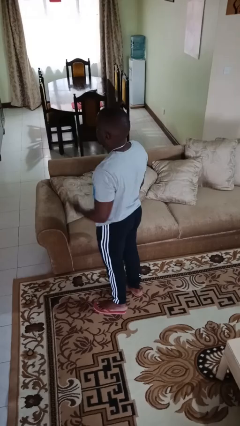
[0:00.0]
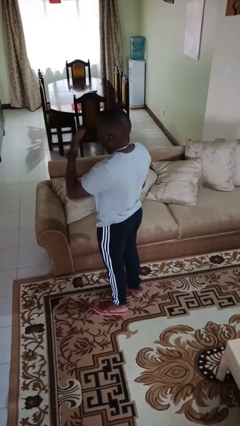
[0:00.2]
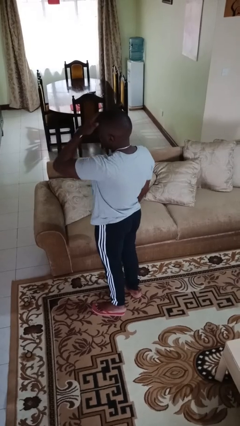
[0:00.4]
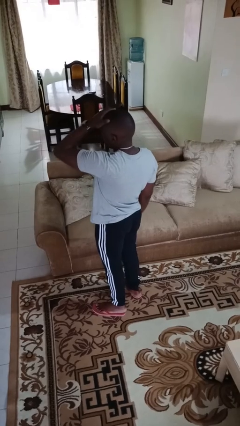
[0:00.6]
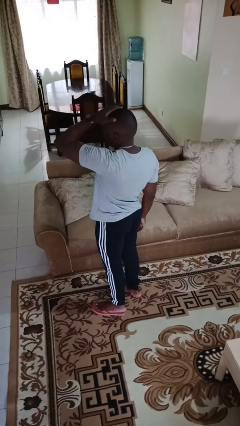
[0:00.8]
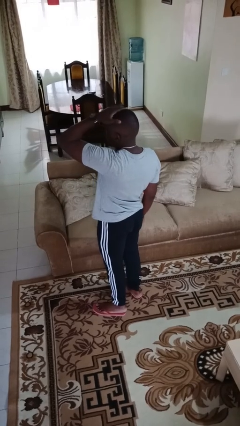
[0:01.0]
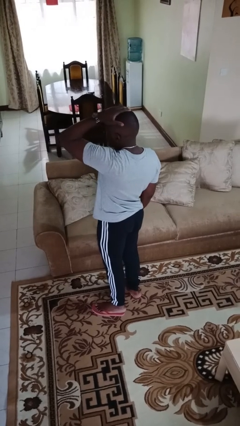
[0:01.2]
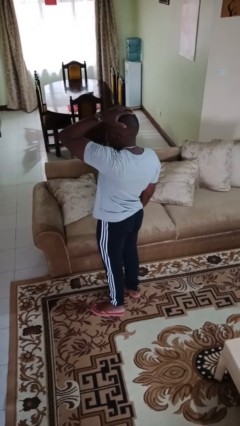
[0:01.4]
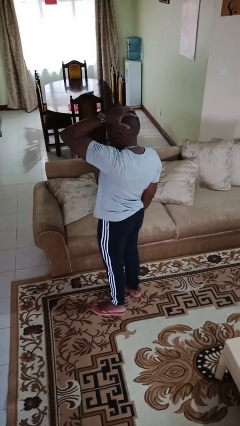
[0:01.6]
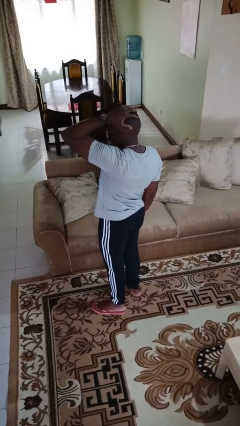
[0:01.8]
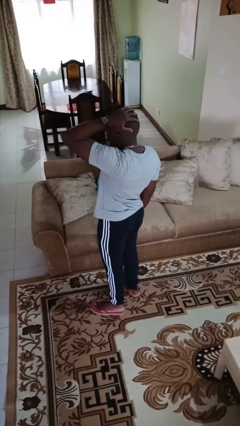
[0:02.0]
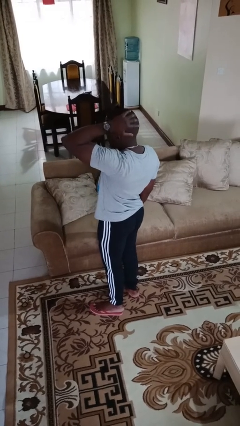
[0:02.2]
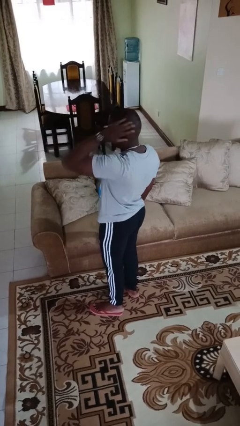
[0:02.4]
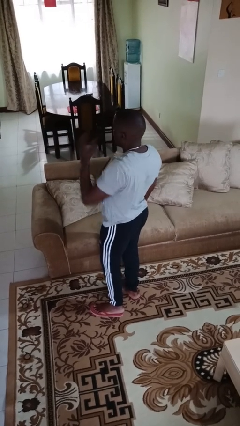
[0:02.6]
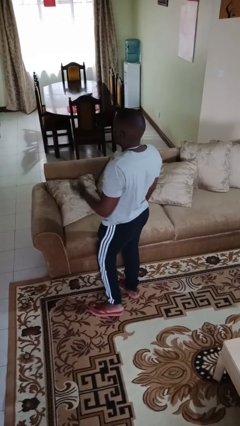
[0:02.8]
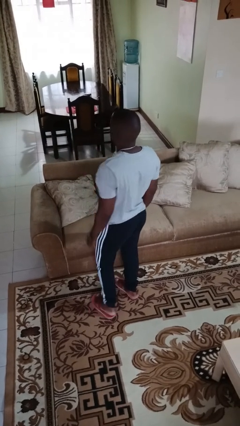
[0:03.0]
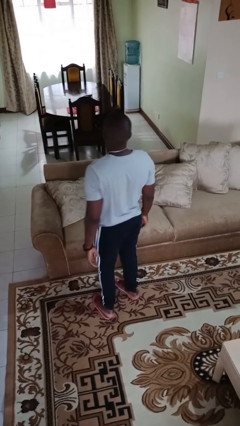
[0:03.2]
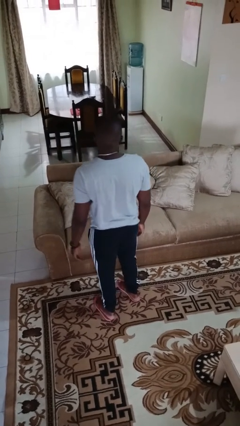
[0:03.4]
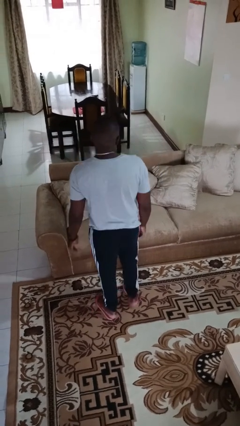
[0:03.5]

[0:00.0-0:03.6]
person strokes hair

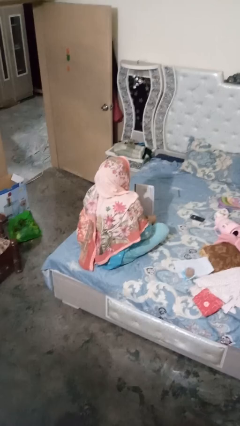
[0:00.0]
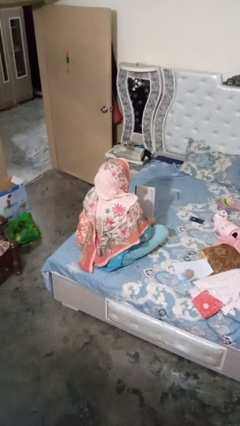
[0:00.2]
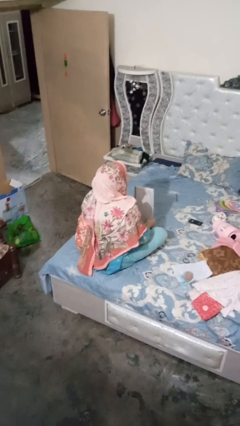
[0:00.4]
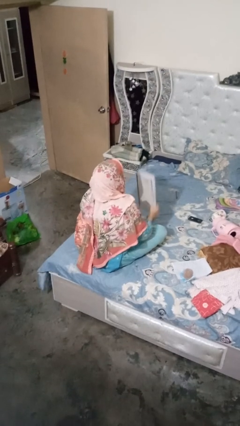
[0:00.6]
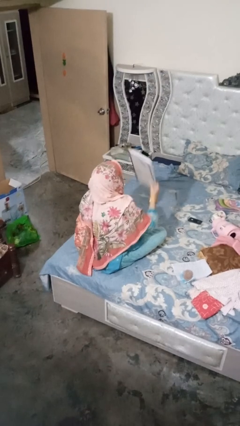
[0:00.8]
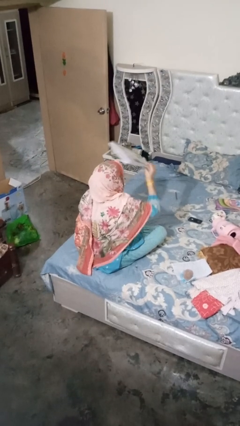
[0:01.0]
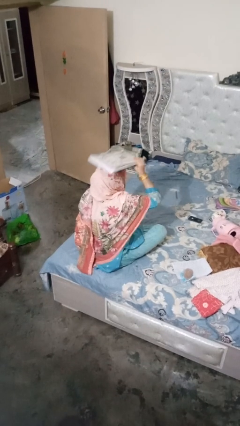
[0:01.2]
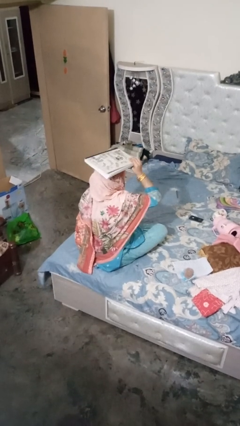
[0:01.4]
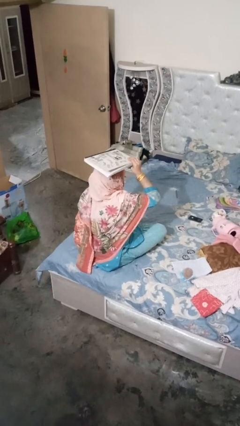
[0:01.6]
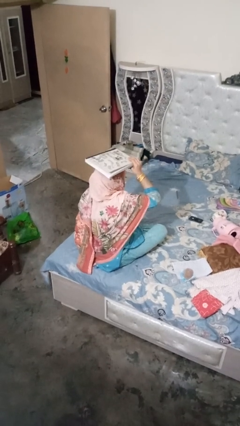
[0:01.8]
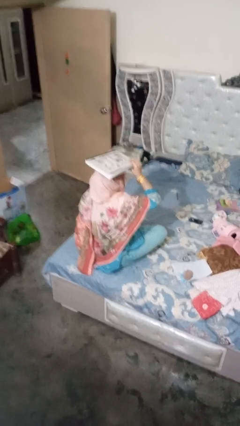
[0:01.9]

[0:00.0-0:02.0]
person holds object above head

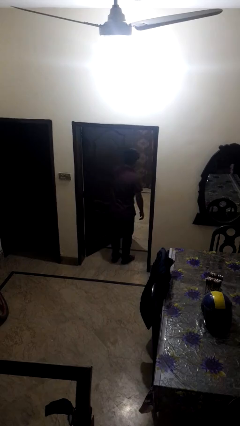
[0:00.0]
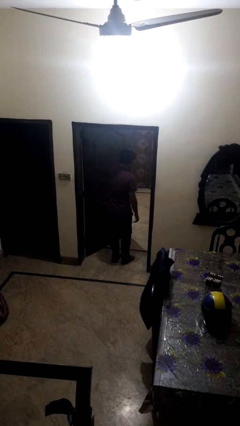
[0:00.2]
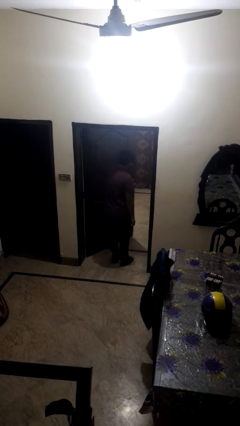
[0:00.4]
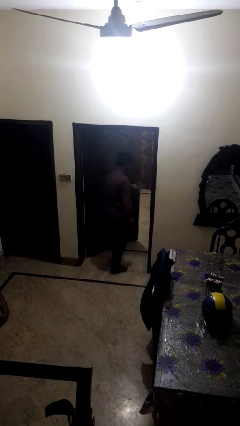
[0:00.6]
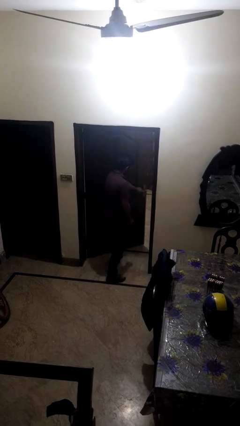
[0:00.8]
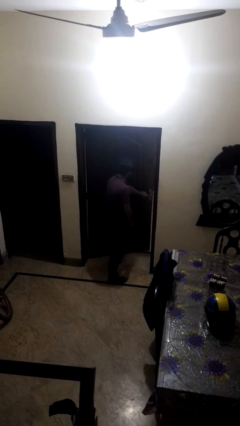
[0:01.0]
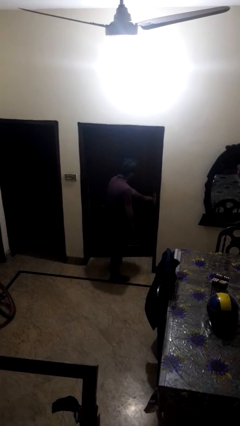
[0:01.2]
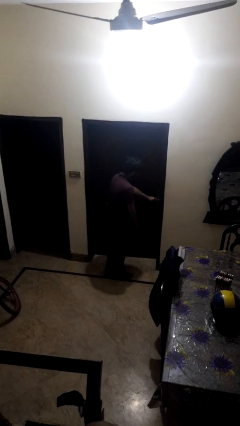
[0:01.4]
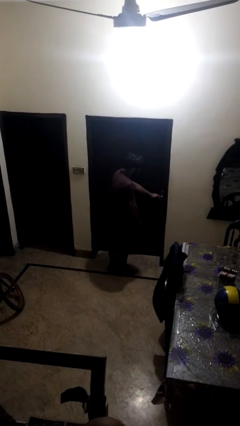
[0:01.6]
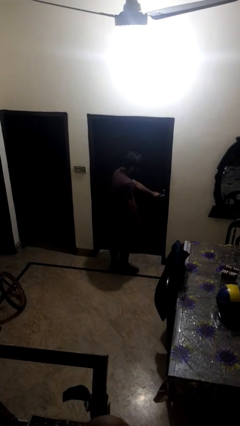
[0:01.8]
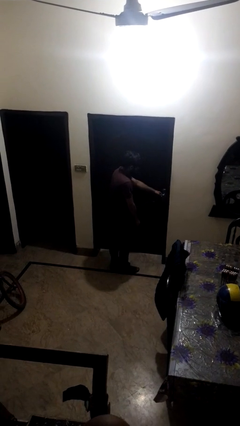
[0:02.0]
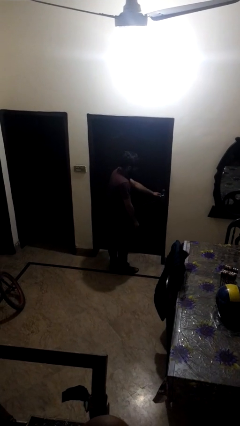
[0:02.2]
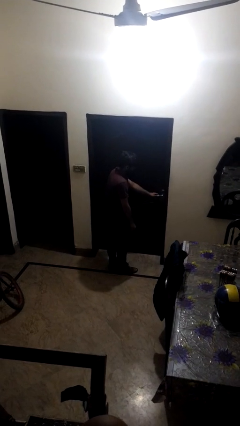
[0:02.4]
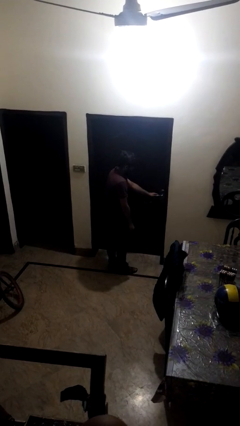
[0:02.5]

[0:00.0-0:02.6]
person closes facility door

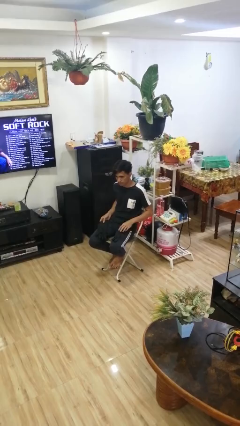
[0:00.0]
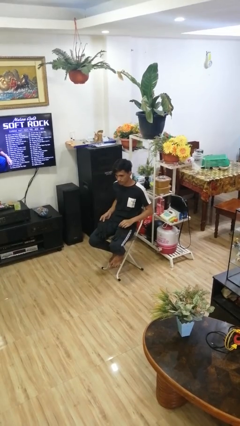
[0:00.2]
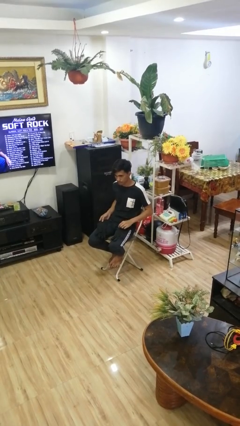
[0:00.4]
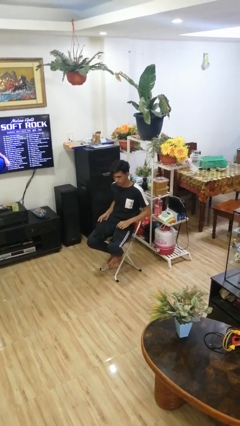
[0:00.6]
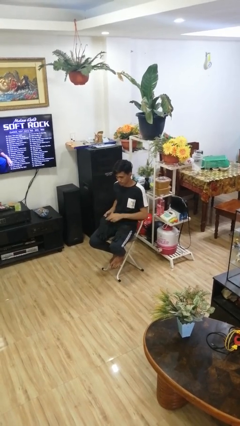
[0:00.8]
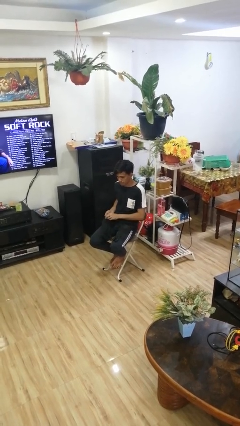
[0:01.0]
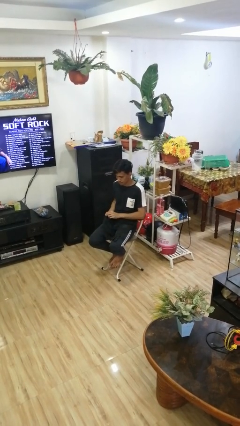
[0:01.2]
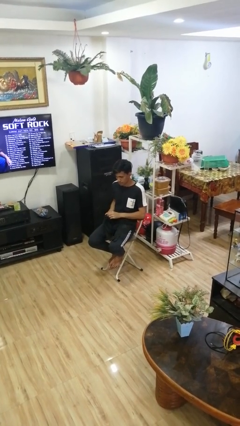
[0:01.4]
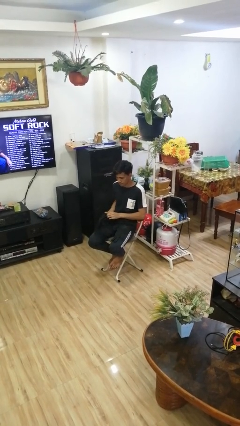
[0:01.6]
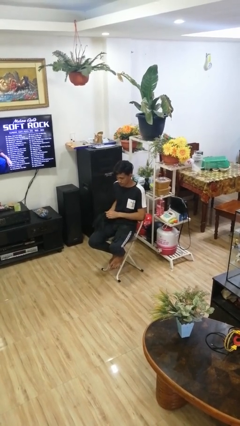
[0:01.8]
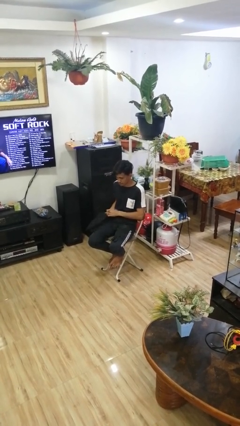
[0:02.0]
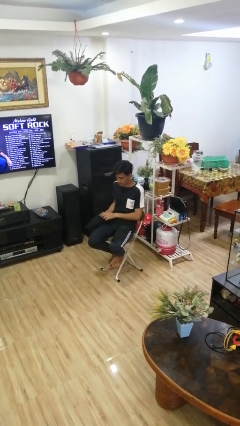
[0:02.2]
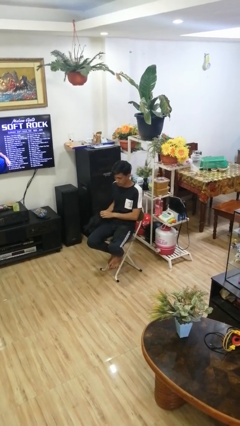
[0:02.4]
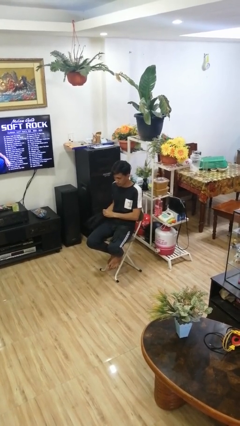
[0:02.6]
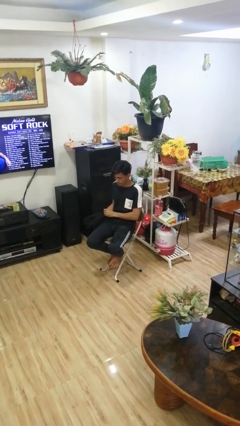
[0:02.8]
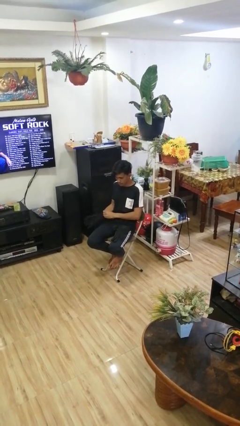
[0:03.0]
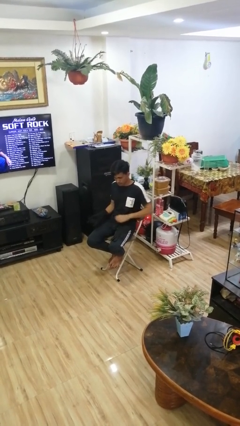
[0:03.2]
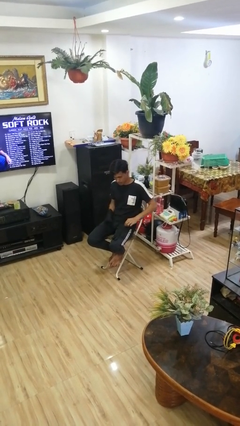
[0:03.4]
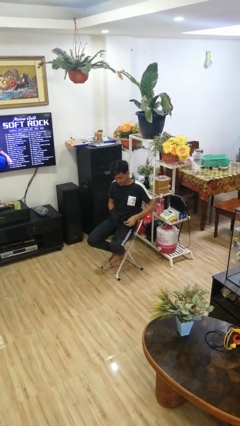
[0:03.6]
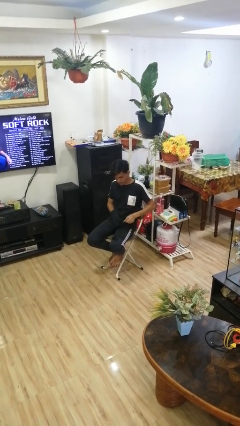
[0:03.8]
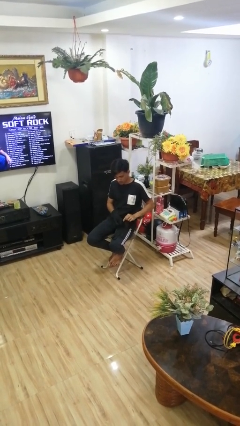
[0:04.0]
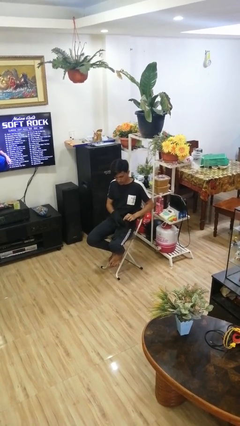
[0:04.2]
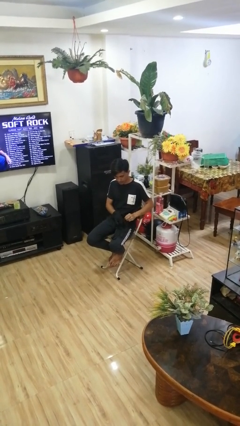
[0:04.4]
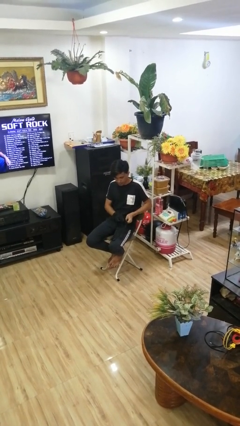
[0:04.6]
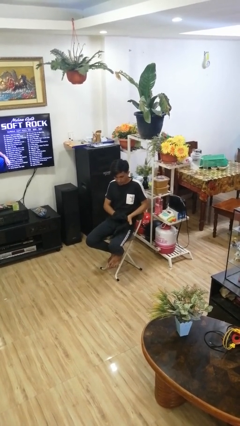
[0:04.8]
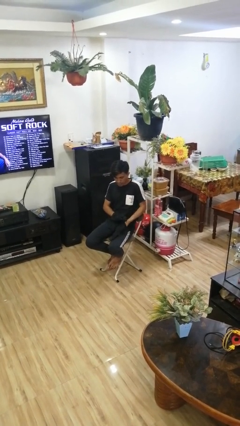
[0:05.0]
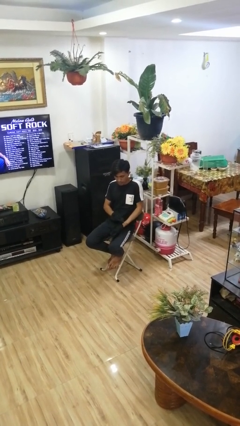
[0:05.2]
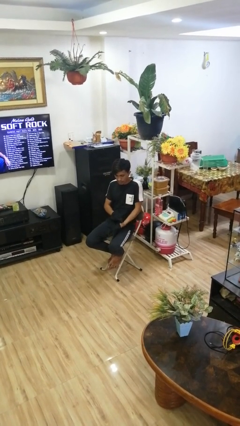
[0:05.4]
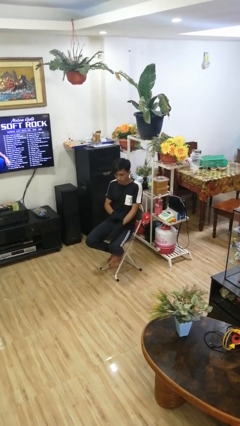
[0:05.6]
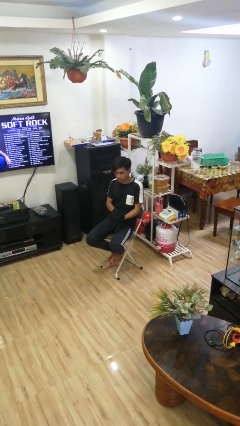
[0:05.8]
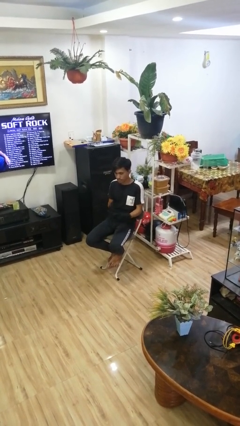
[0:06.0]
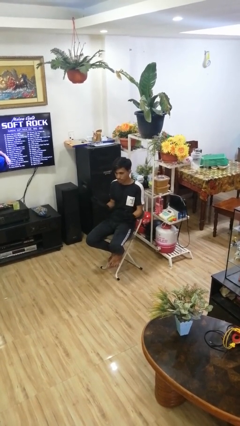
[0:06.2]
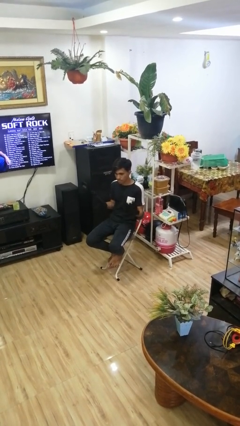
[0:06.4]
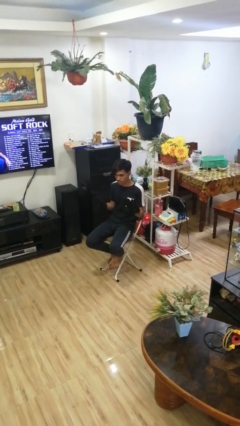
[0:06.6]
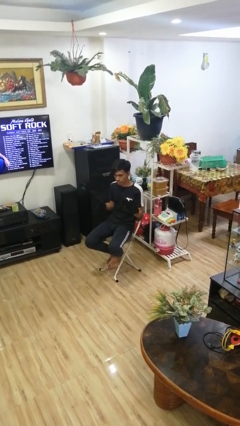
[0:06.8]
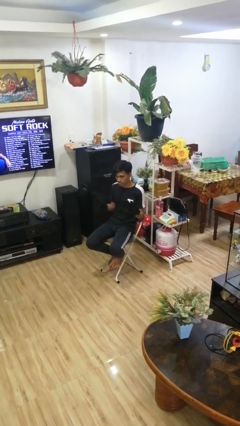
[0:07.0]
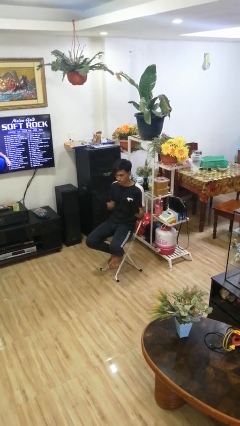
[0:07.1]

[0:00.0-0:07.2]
person puts on gloves

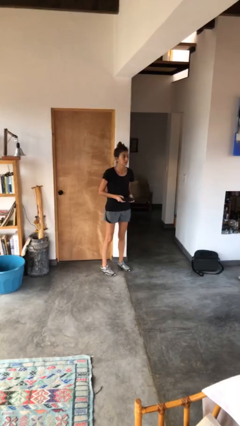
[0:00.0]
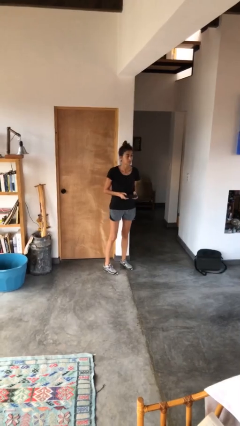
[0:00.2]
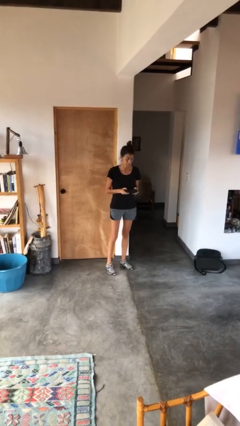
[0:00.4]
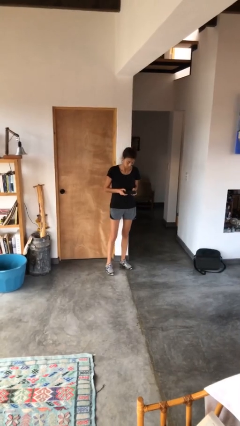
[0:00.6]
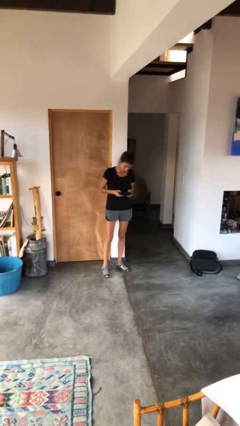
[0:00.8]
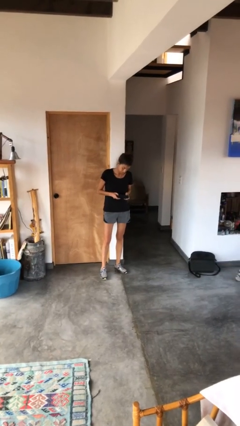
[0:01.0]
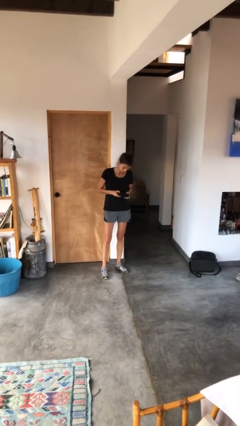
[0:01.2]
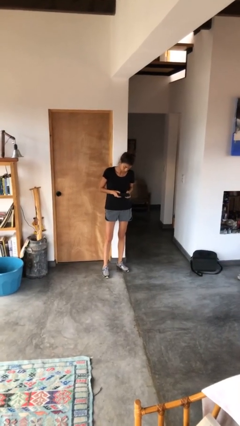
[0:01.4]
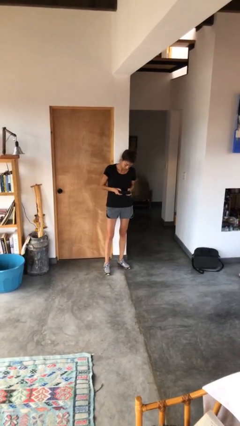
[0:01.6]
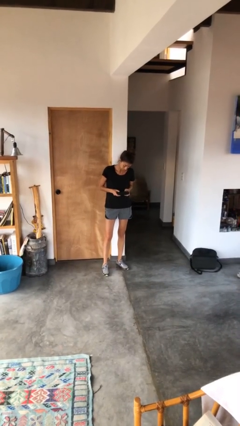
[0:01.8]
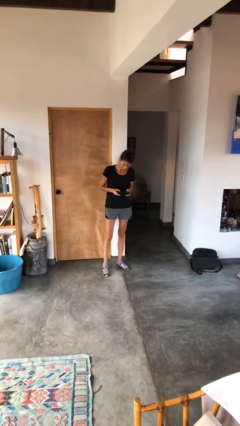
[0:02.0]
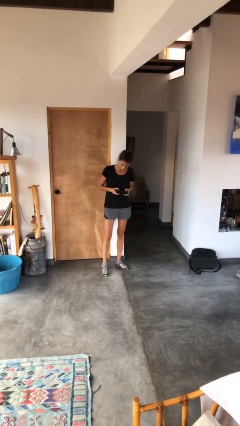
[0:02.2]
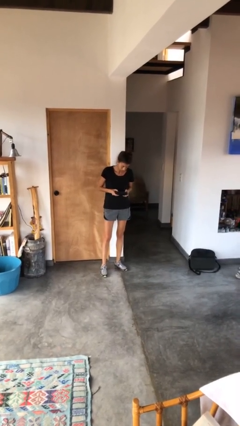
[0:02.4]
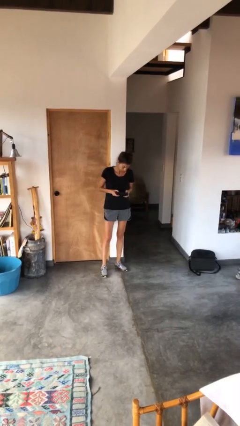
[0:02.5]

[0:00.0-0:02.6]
person interacts with handheld game
